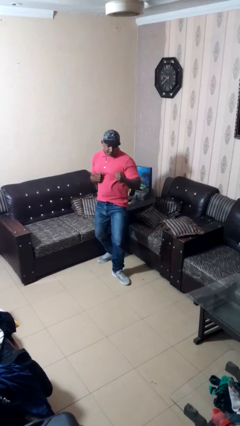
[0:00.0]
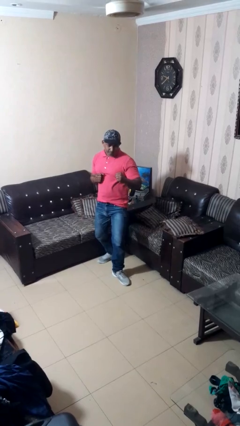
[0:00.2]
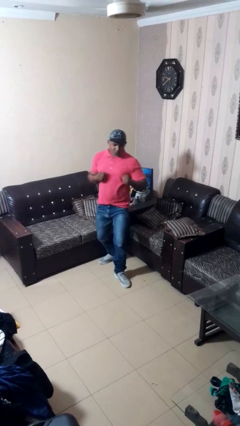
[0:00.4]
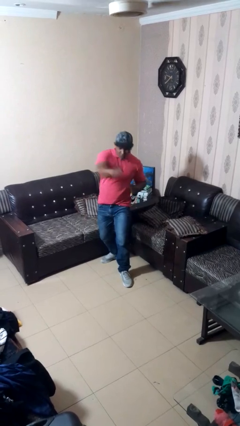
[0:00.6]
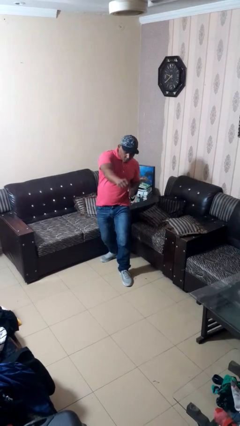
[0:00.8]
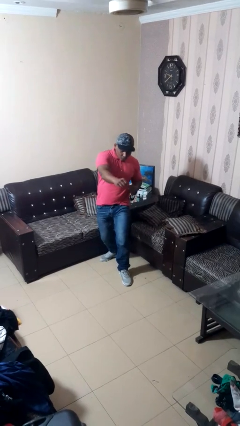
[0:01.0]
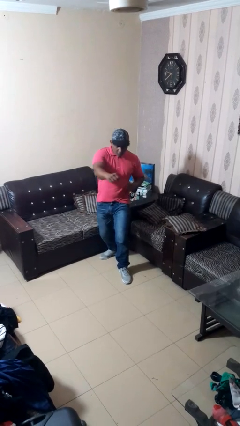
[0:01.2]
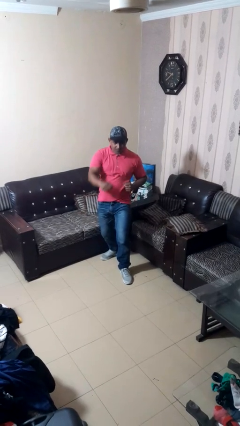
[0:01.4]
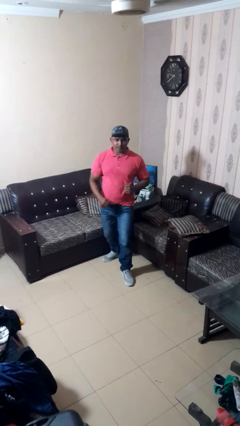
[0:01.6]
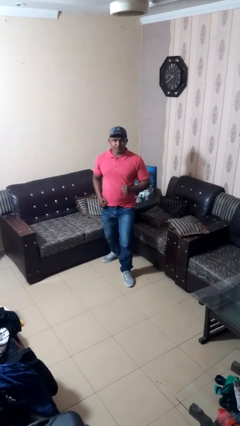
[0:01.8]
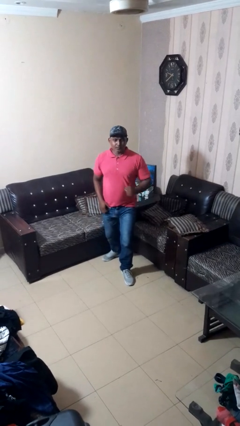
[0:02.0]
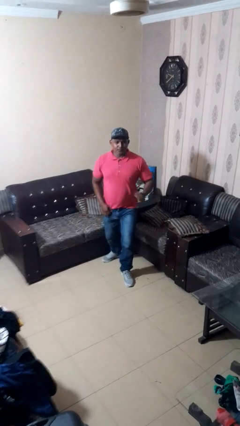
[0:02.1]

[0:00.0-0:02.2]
person karate chop

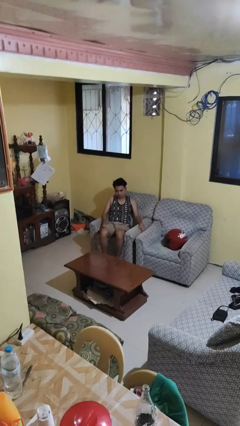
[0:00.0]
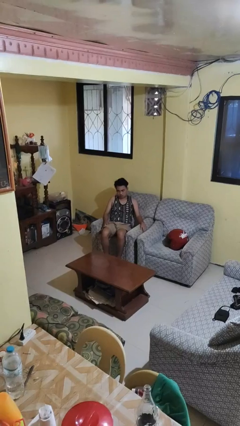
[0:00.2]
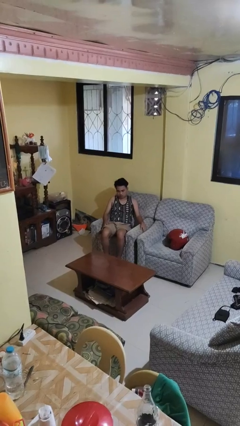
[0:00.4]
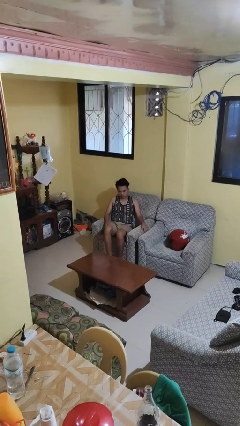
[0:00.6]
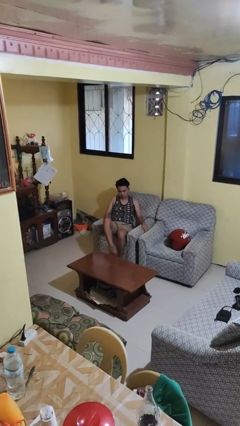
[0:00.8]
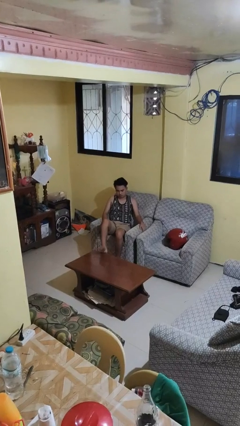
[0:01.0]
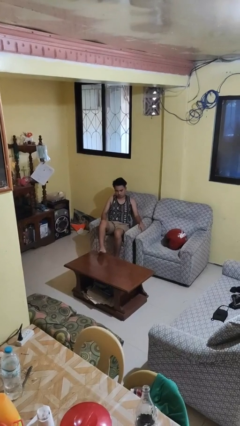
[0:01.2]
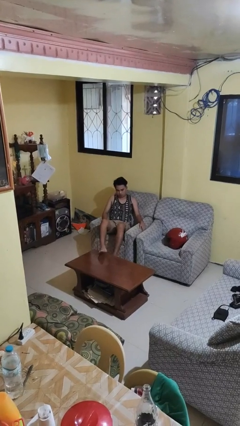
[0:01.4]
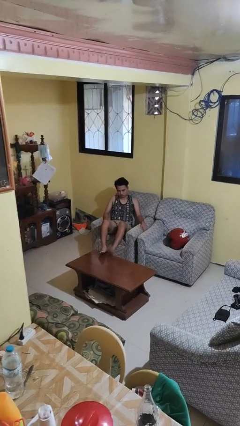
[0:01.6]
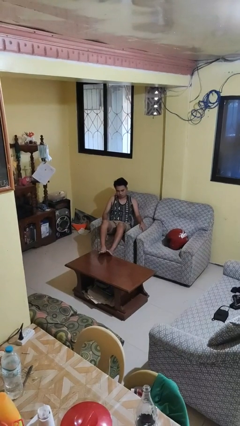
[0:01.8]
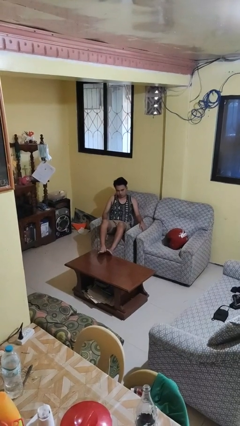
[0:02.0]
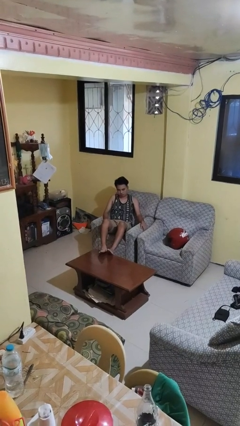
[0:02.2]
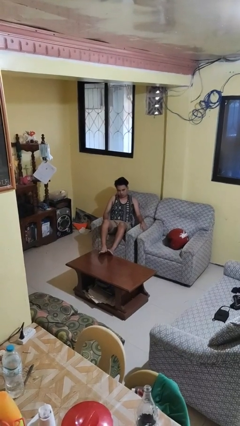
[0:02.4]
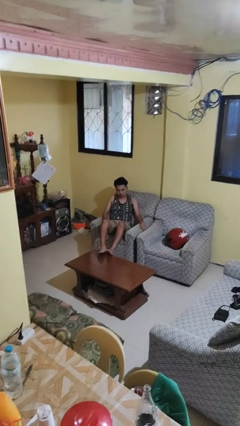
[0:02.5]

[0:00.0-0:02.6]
person puts feet up

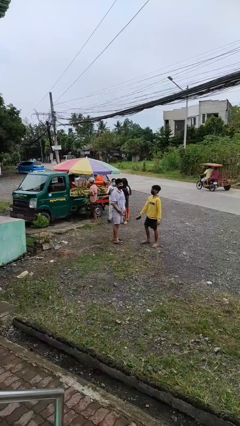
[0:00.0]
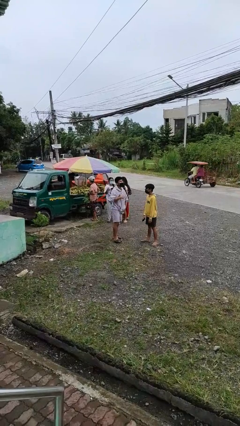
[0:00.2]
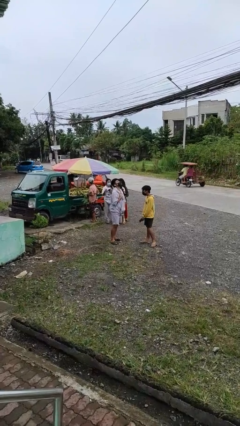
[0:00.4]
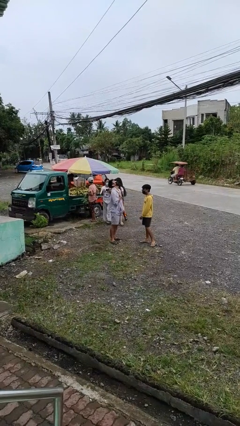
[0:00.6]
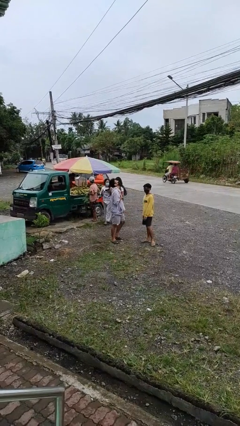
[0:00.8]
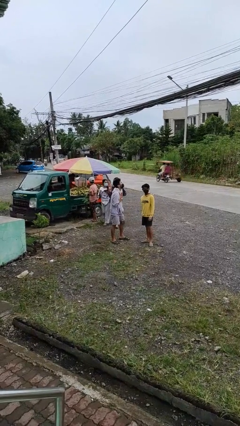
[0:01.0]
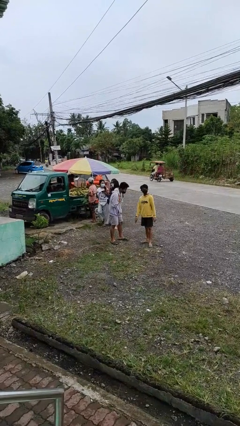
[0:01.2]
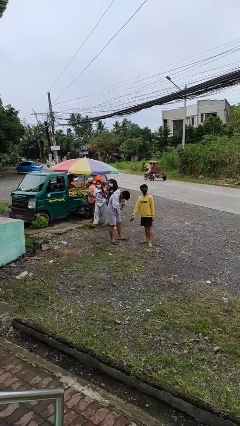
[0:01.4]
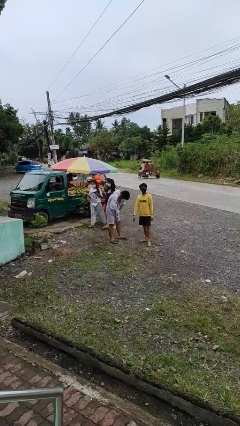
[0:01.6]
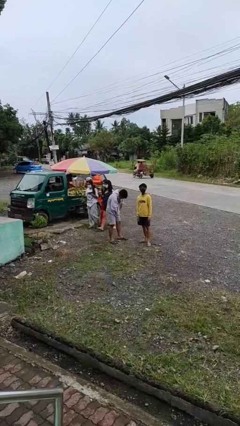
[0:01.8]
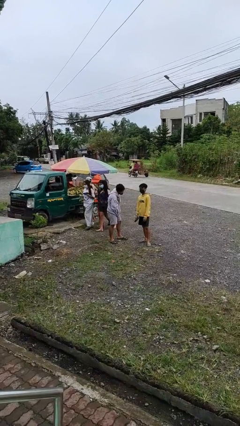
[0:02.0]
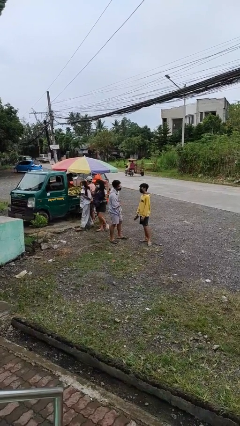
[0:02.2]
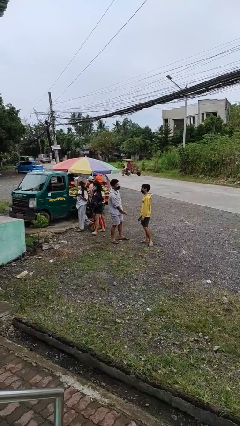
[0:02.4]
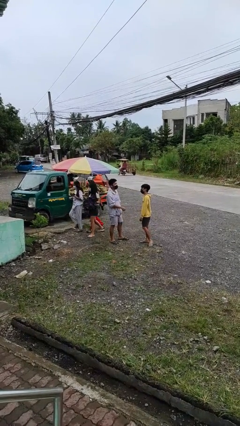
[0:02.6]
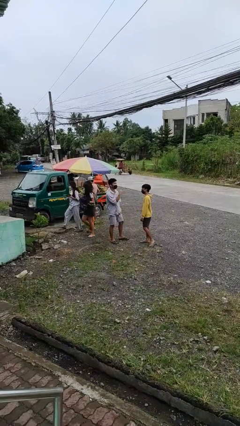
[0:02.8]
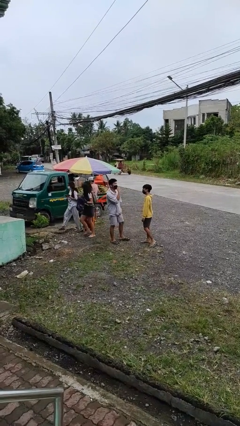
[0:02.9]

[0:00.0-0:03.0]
person laughs with person

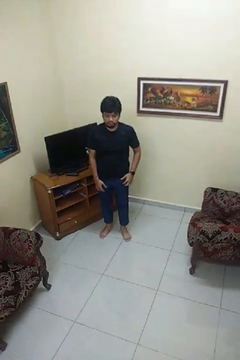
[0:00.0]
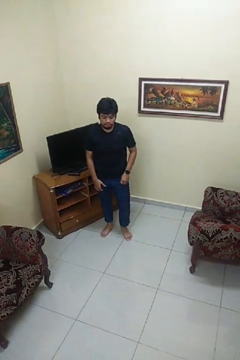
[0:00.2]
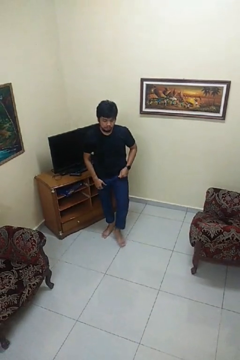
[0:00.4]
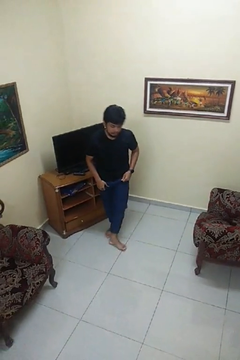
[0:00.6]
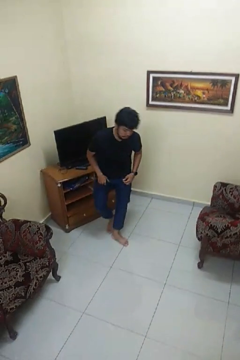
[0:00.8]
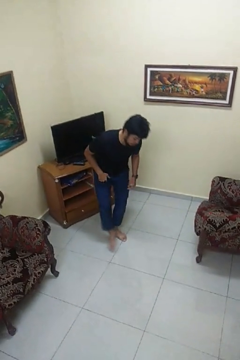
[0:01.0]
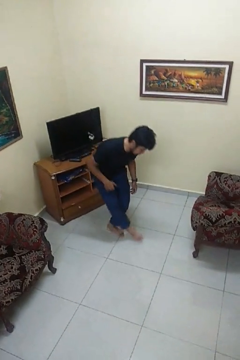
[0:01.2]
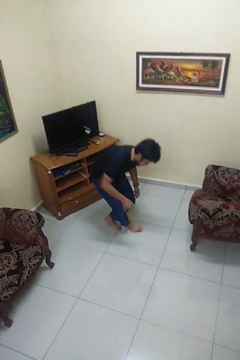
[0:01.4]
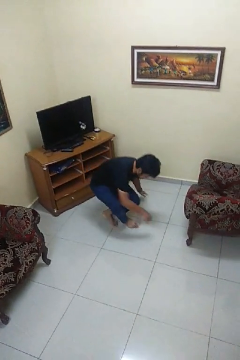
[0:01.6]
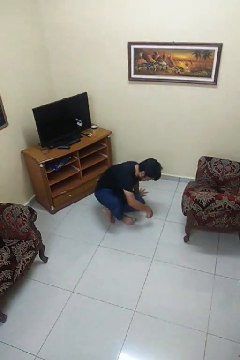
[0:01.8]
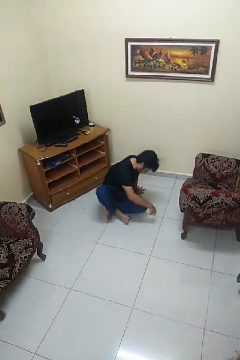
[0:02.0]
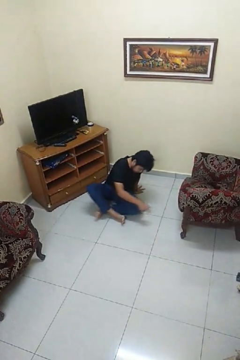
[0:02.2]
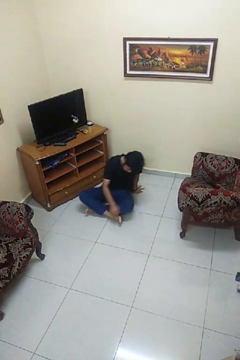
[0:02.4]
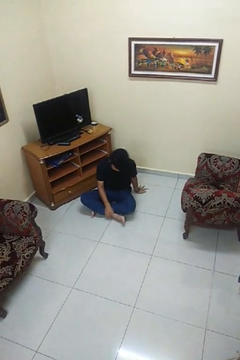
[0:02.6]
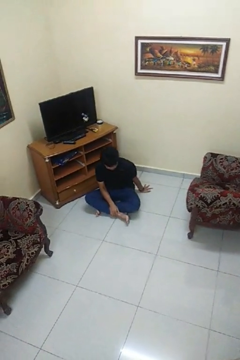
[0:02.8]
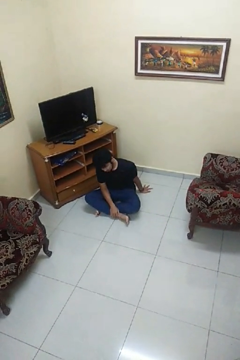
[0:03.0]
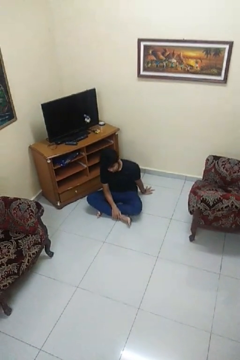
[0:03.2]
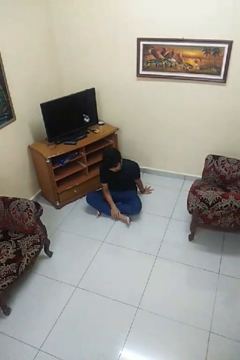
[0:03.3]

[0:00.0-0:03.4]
person sits crisscross

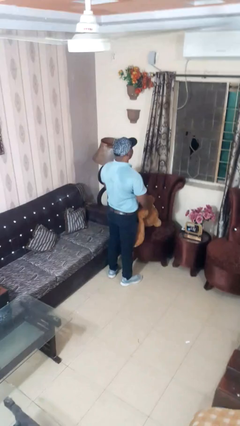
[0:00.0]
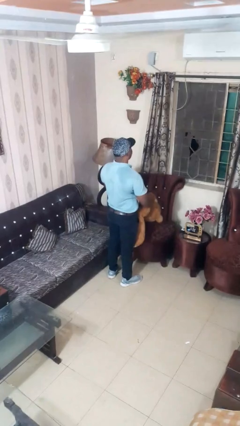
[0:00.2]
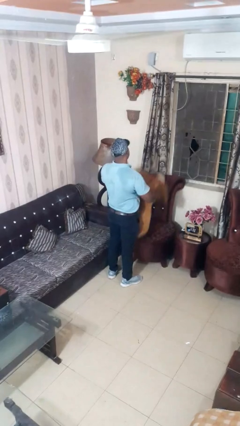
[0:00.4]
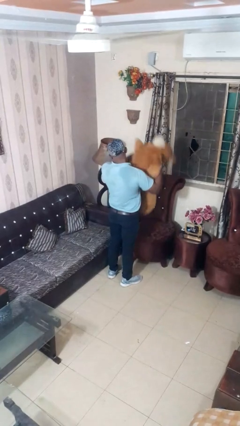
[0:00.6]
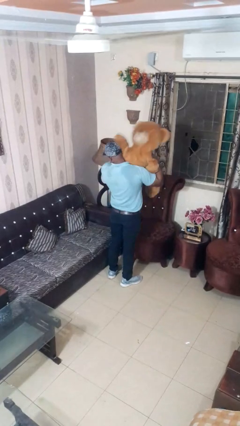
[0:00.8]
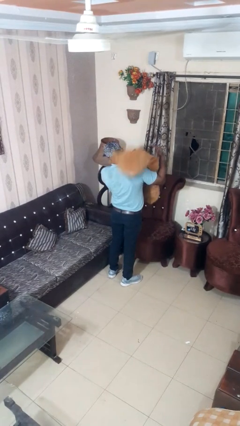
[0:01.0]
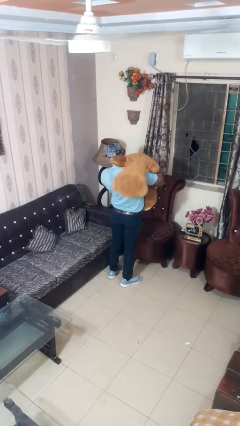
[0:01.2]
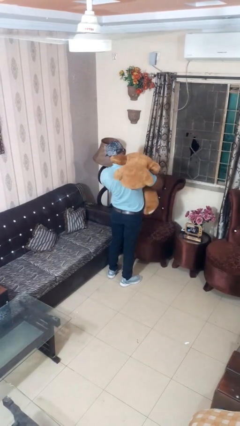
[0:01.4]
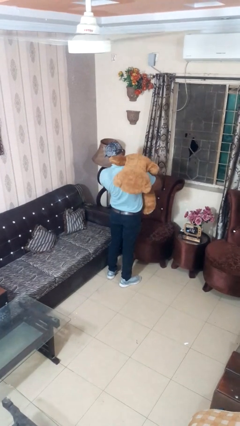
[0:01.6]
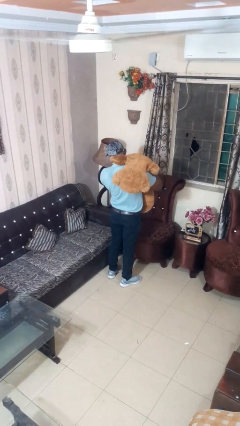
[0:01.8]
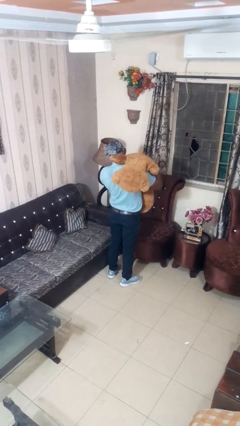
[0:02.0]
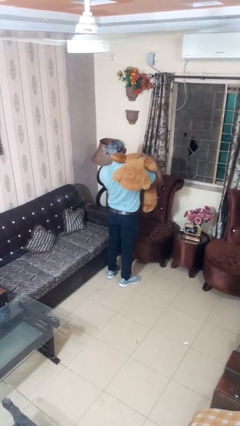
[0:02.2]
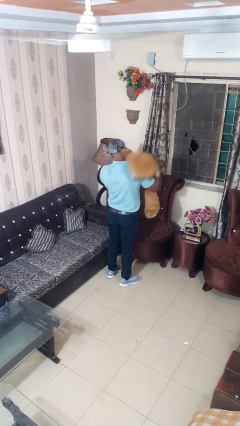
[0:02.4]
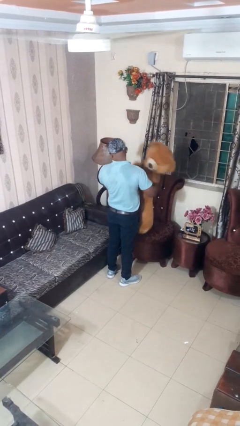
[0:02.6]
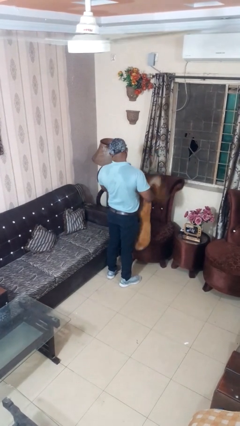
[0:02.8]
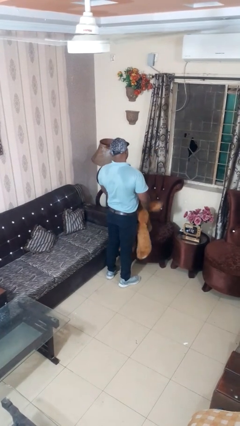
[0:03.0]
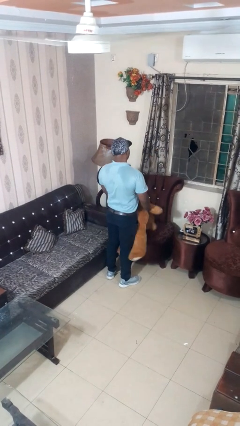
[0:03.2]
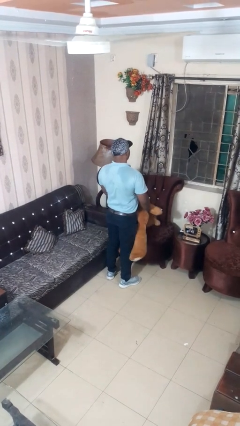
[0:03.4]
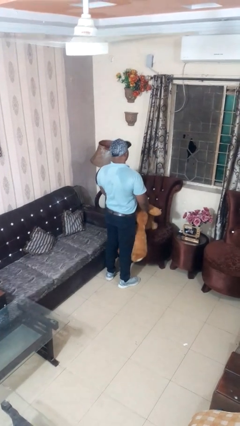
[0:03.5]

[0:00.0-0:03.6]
person hugs stuffed animal

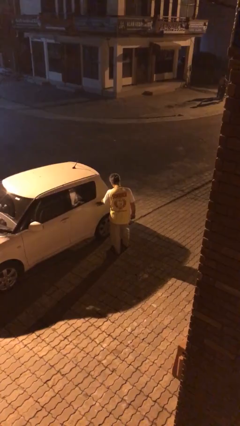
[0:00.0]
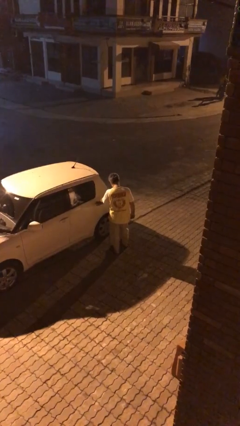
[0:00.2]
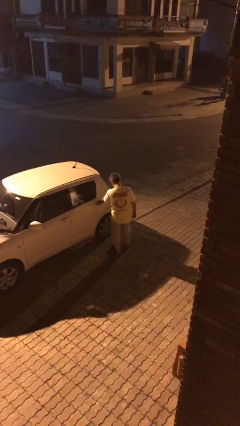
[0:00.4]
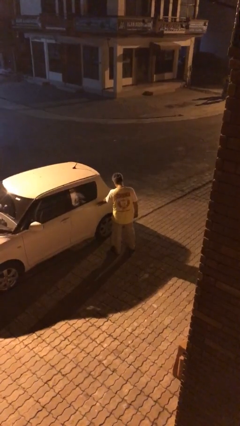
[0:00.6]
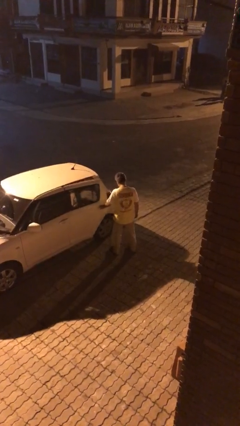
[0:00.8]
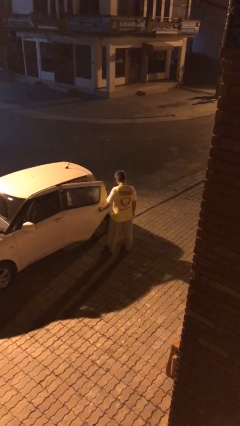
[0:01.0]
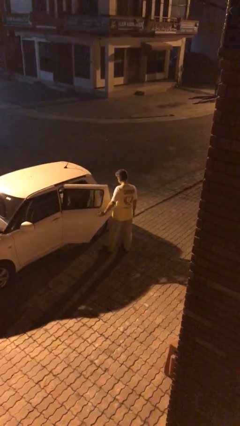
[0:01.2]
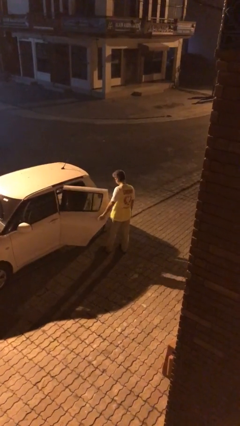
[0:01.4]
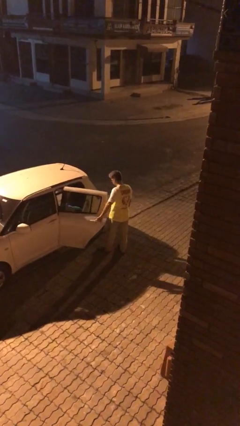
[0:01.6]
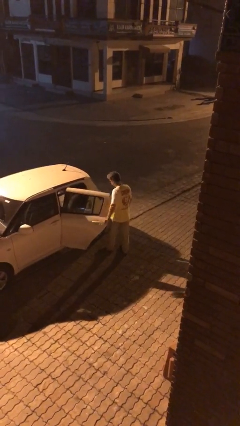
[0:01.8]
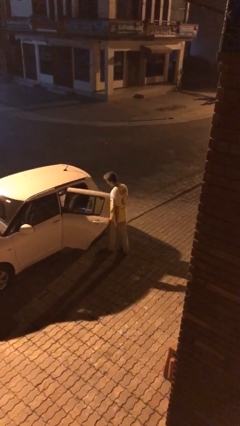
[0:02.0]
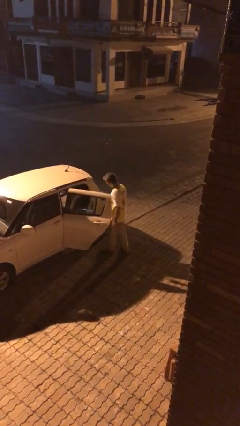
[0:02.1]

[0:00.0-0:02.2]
person opens car door

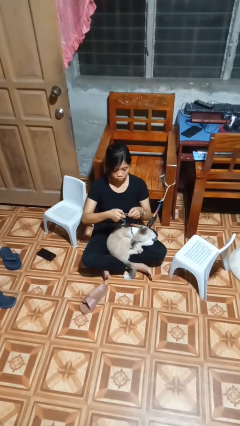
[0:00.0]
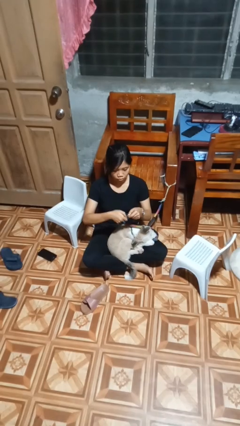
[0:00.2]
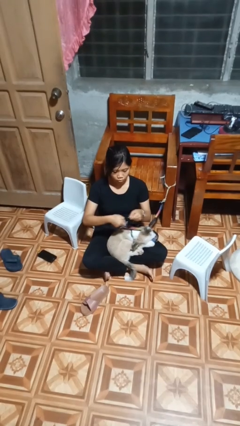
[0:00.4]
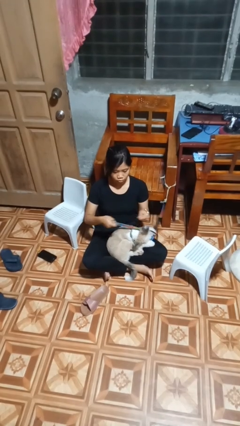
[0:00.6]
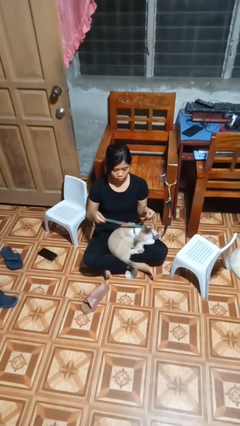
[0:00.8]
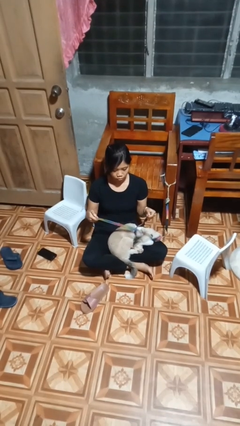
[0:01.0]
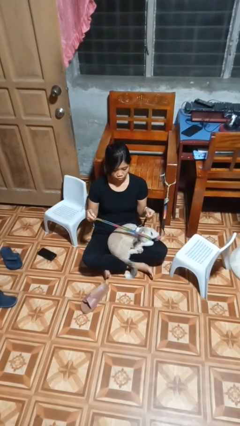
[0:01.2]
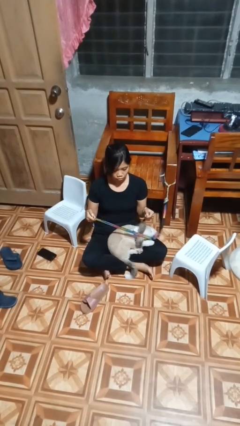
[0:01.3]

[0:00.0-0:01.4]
person unattaches leash from dog
